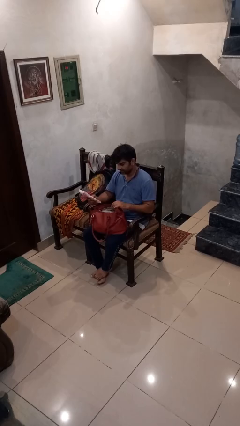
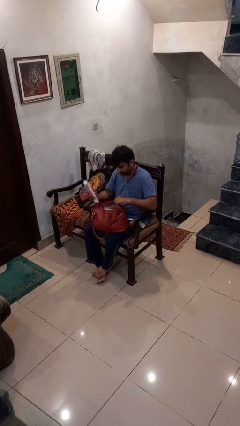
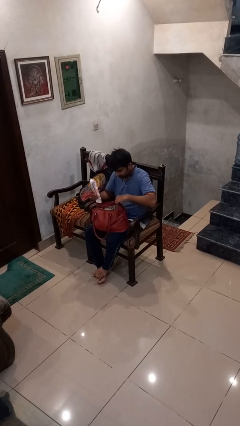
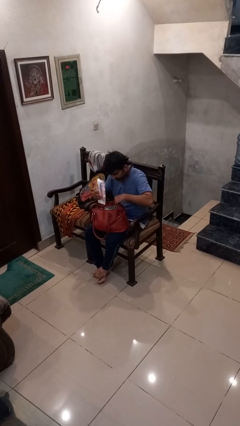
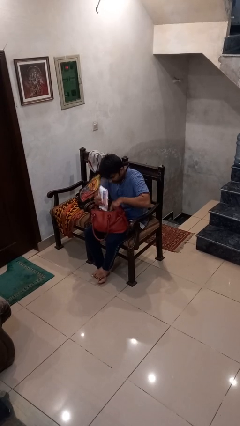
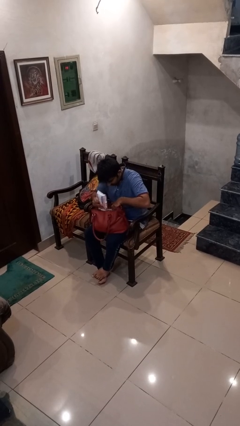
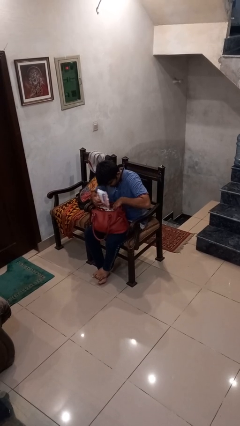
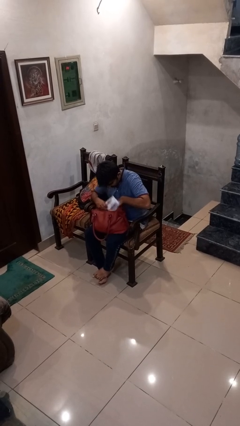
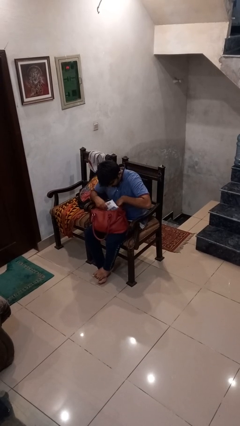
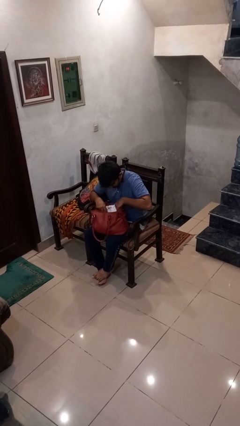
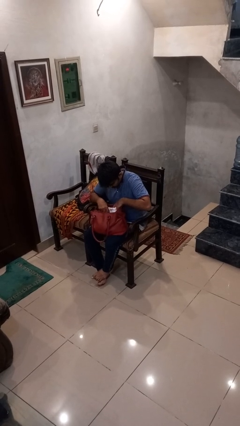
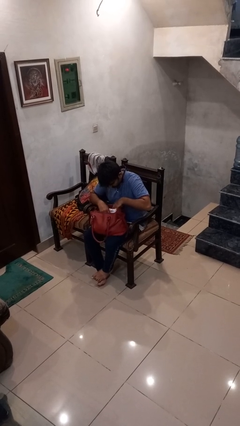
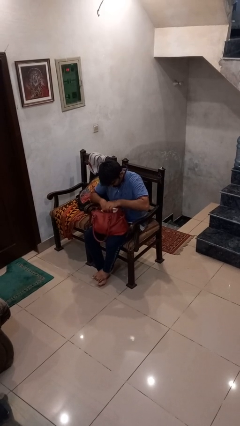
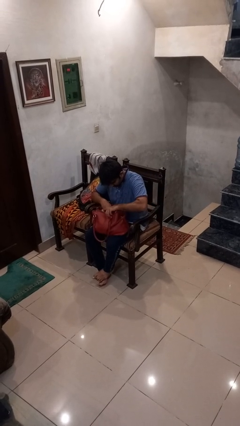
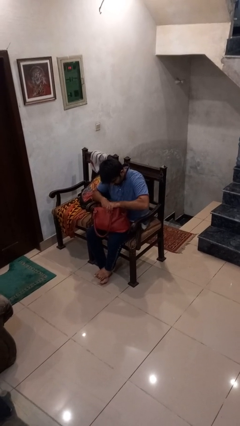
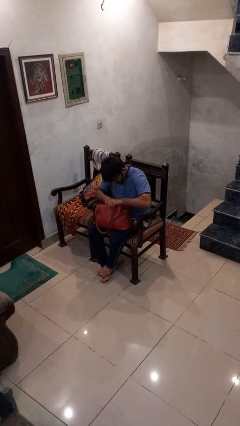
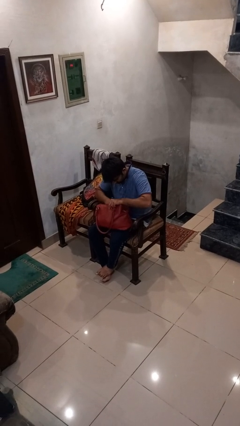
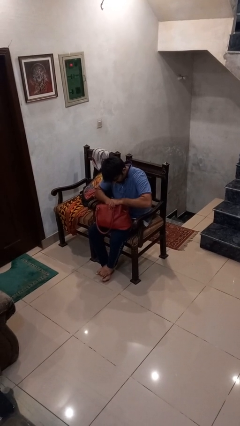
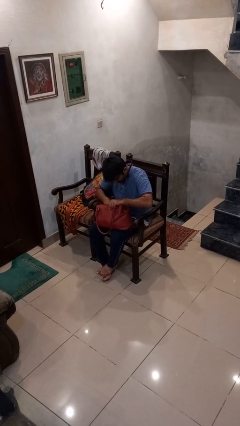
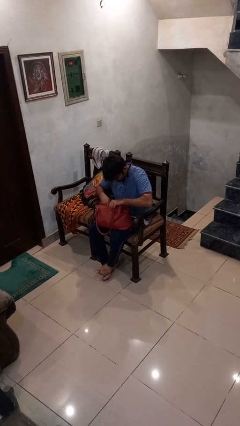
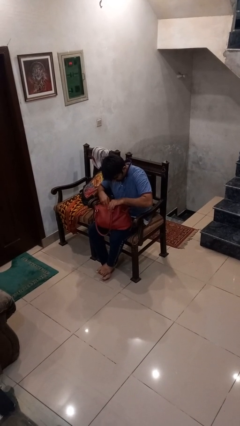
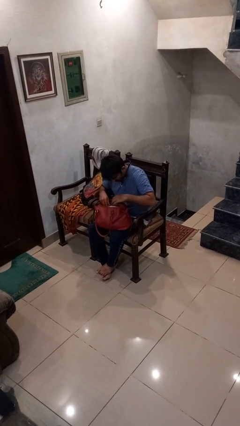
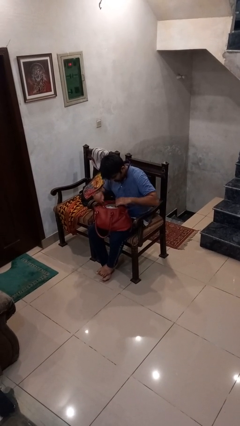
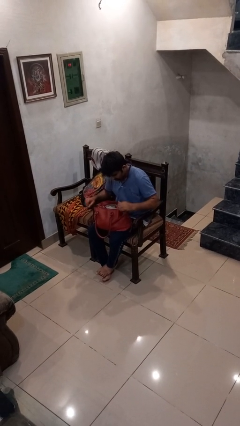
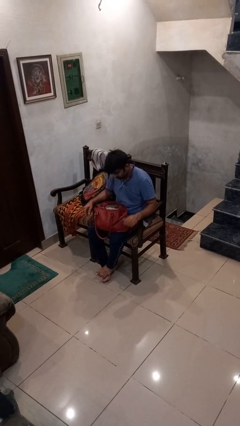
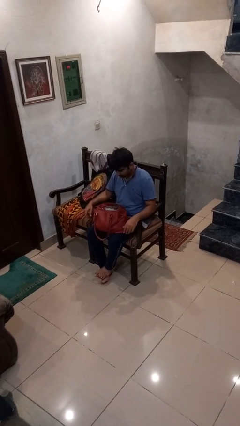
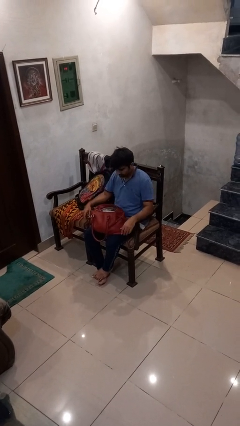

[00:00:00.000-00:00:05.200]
person puts object into purse

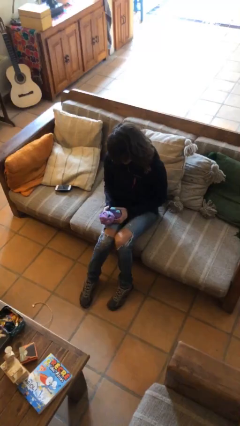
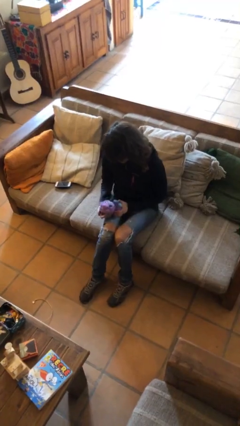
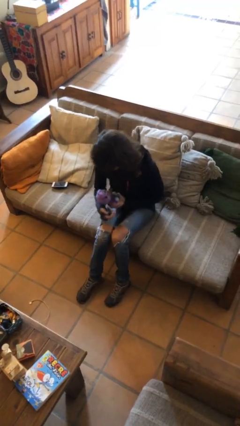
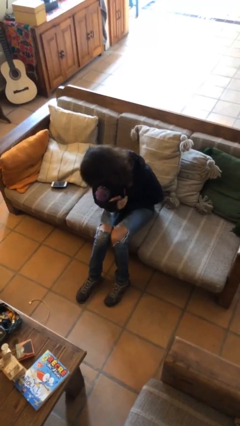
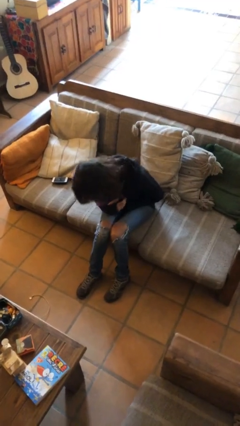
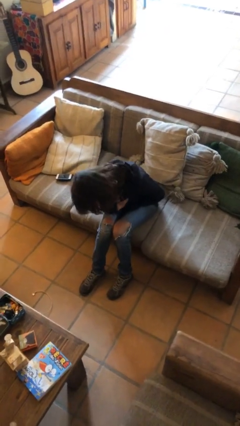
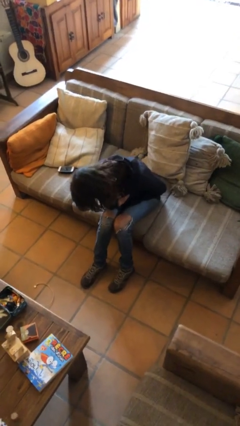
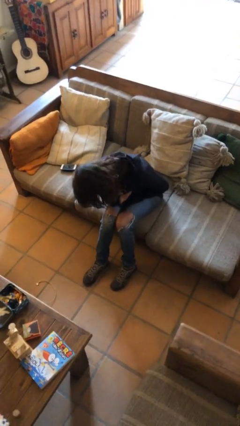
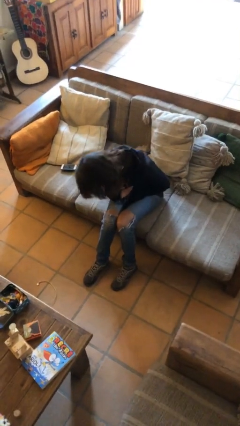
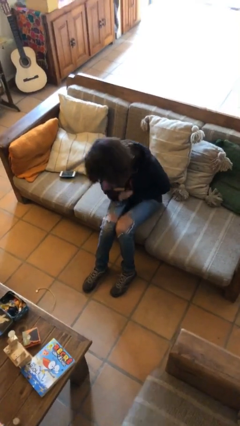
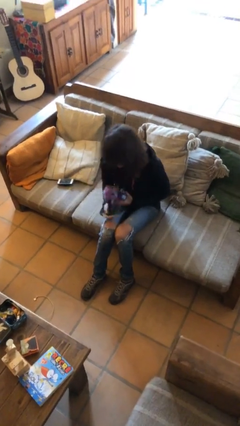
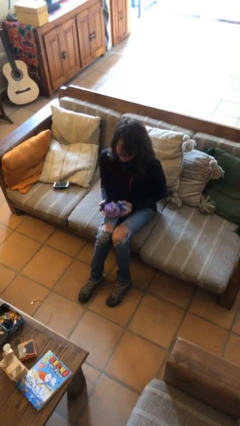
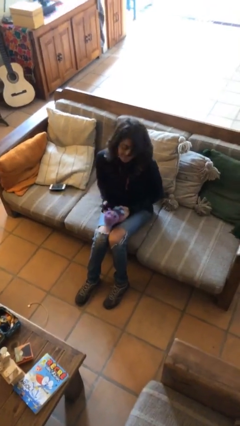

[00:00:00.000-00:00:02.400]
person hugs stuffed animal

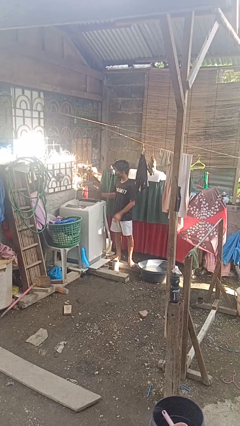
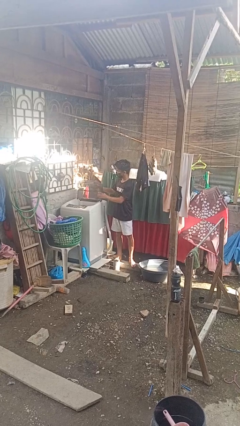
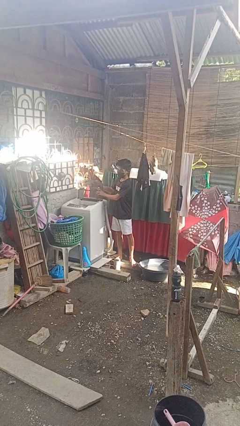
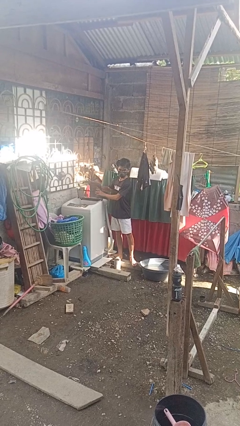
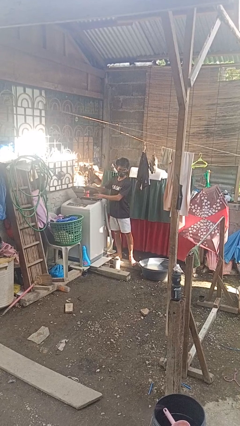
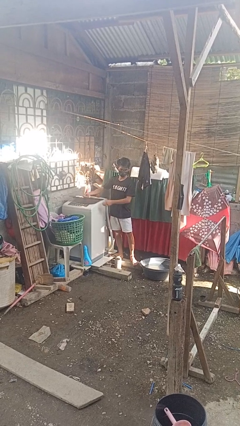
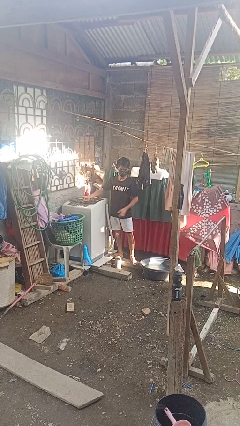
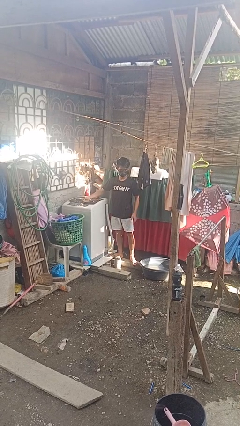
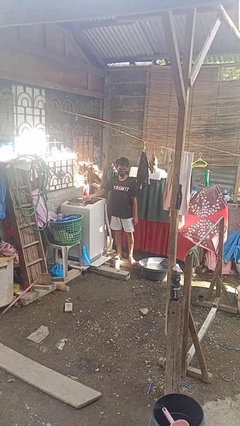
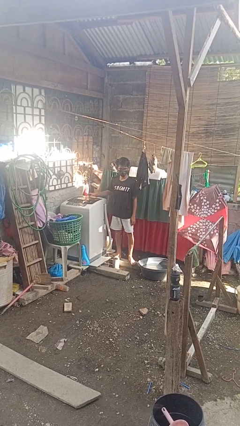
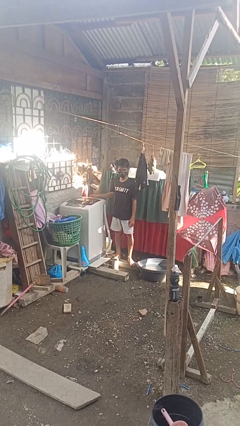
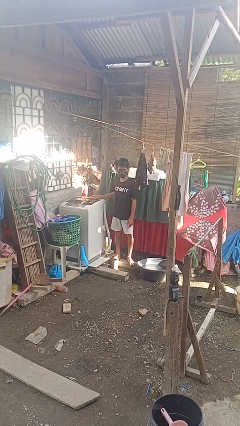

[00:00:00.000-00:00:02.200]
person closes clothes washer

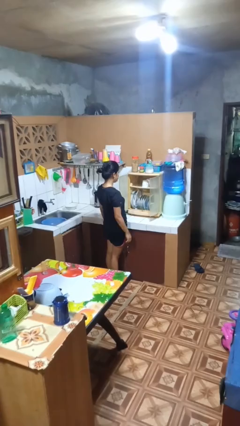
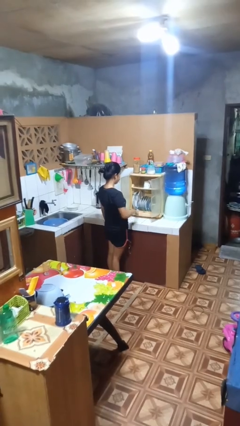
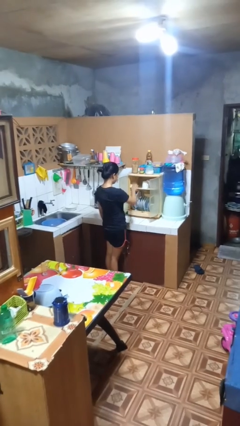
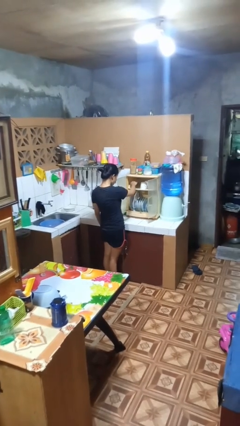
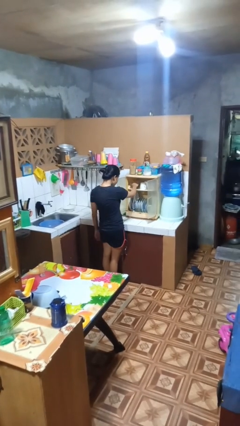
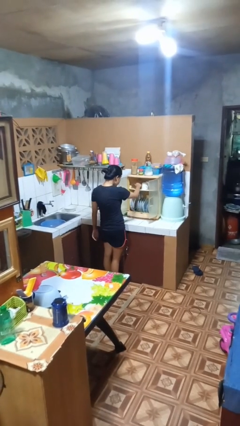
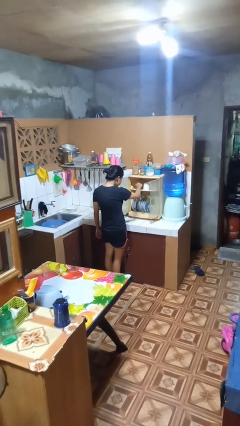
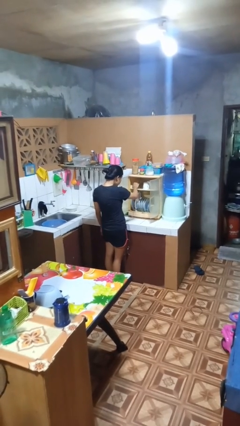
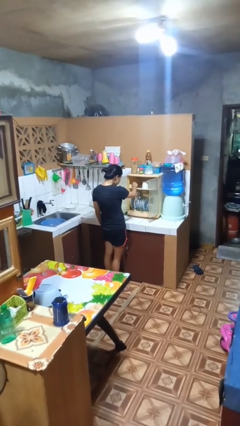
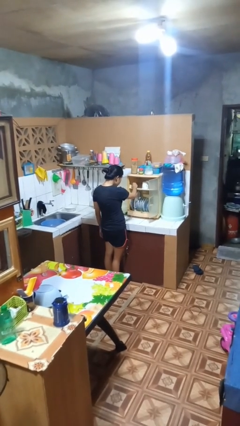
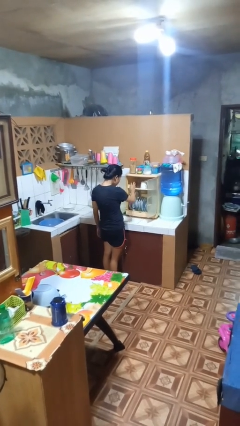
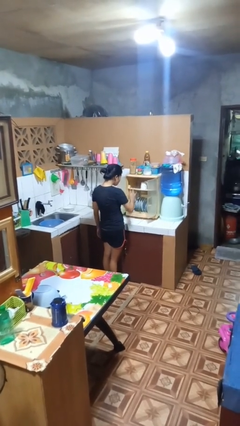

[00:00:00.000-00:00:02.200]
person searches in kitchen drawer

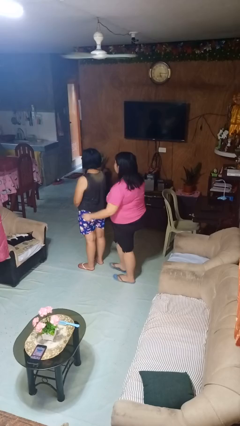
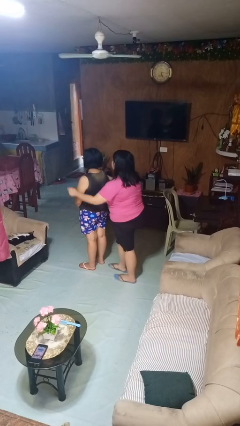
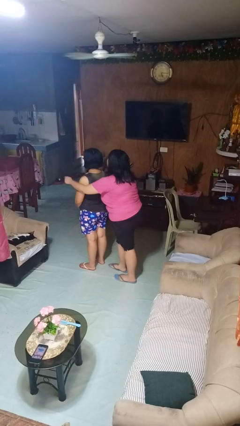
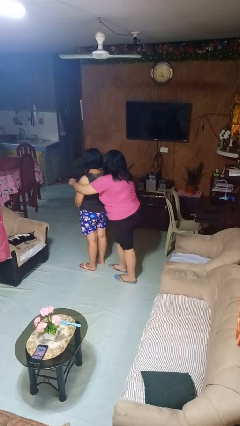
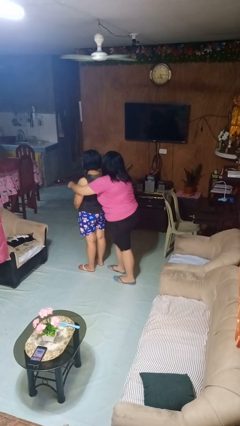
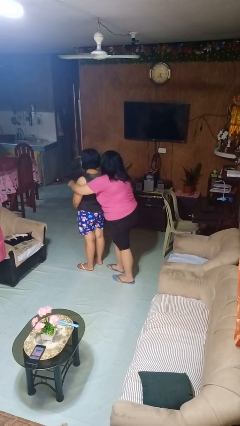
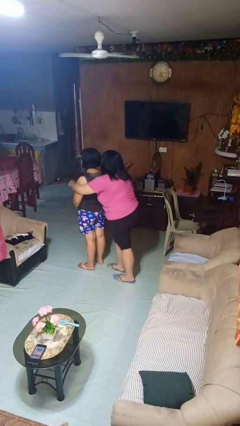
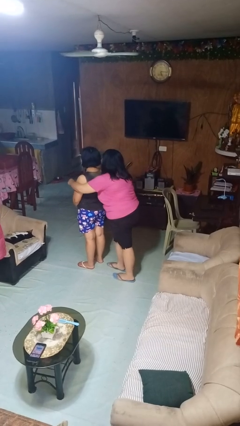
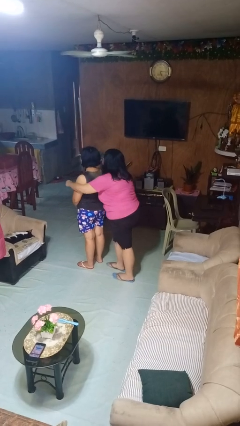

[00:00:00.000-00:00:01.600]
person hugs person from behind

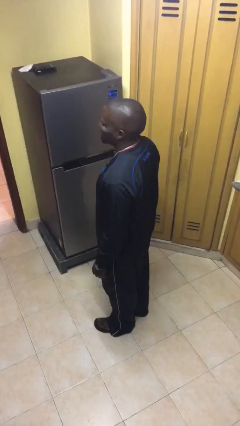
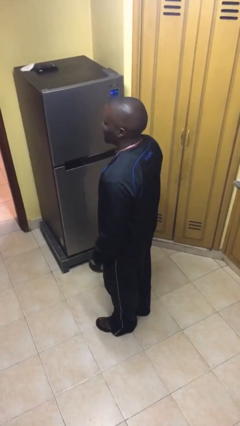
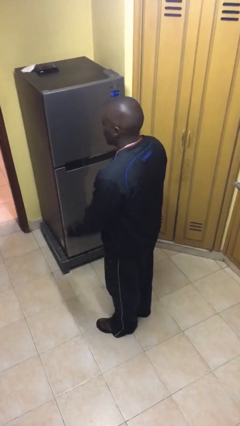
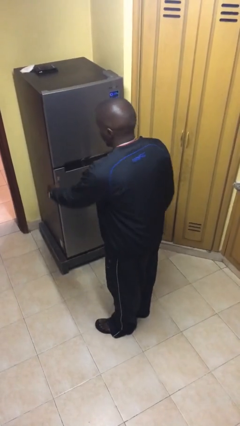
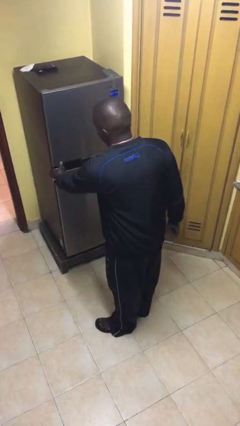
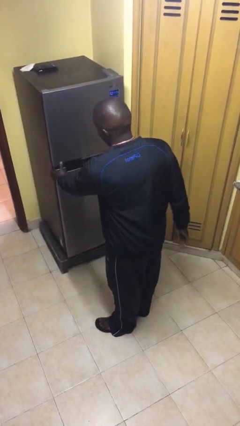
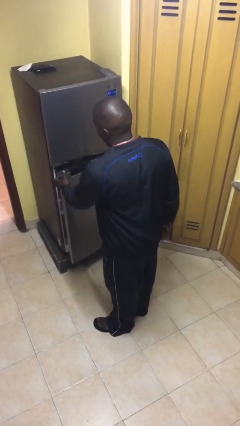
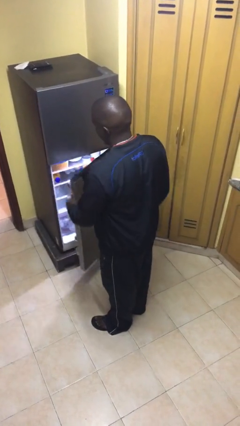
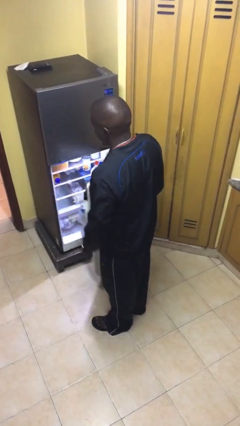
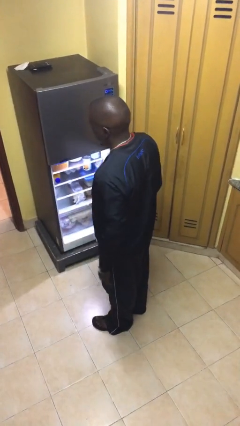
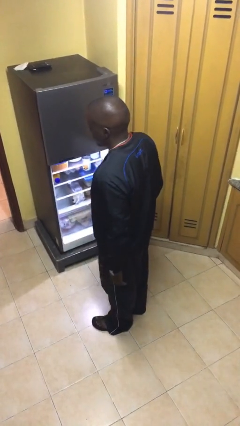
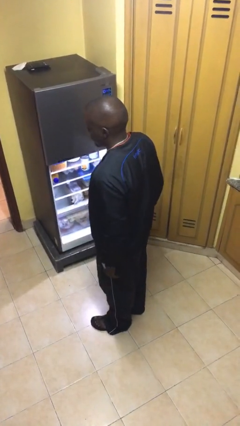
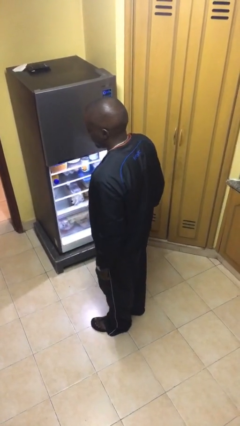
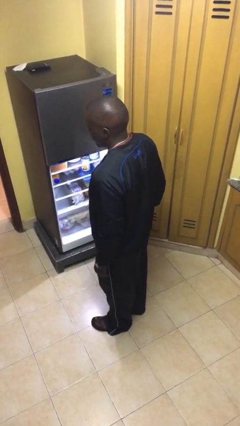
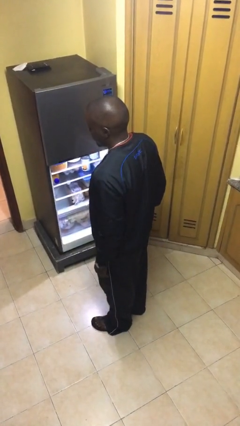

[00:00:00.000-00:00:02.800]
person opens refrigerator

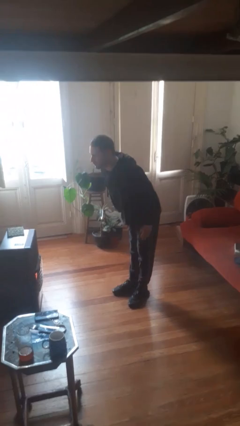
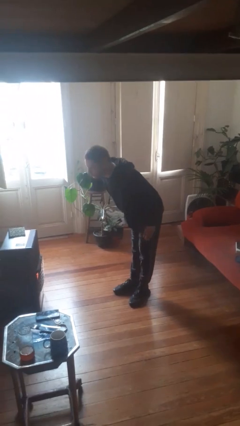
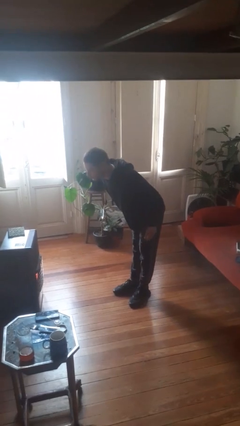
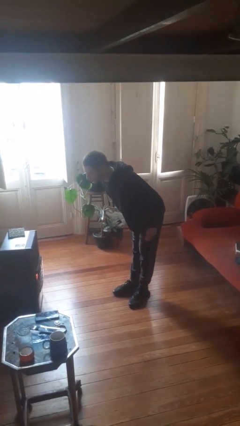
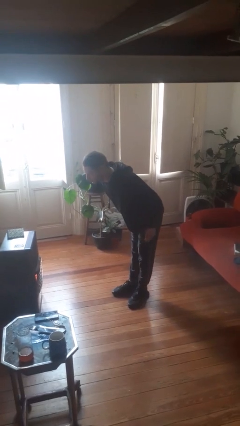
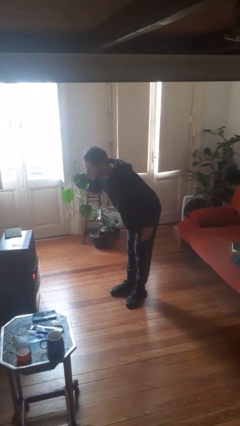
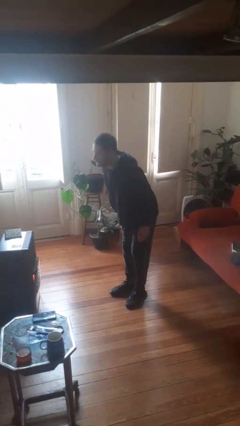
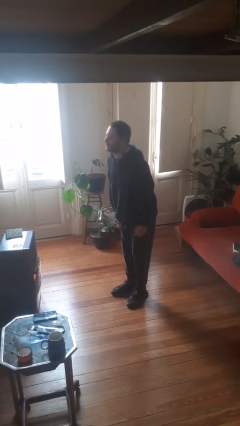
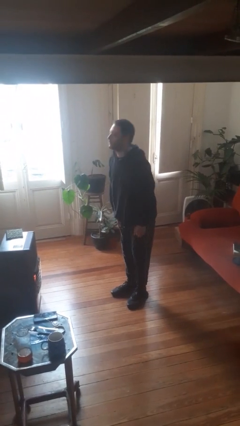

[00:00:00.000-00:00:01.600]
person bows
